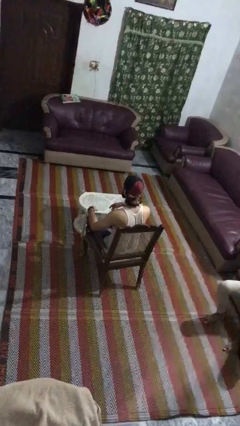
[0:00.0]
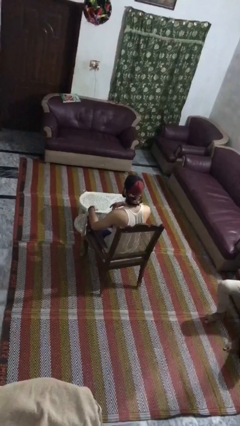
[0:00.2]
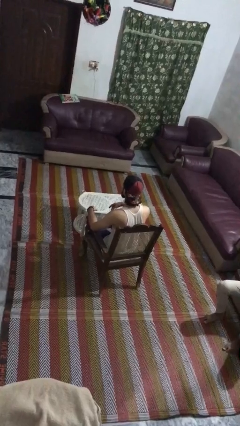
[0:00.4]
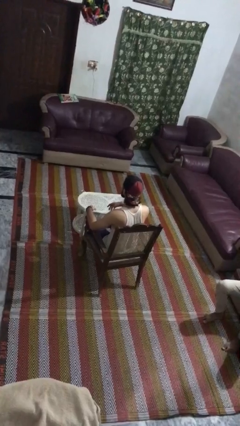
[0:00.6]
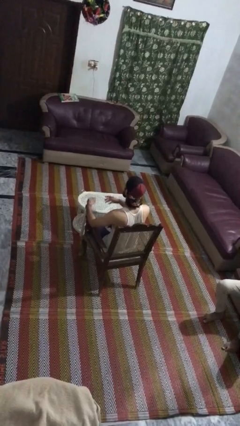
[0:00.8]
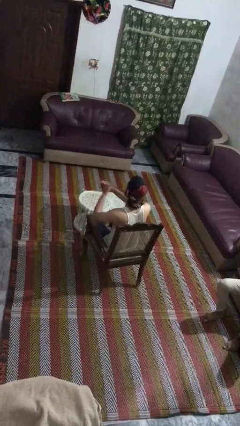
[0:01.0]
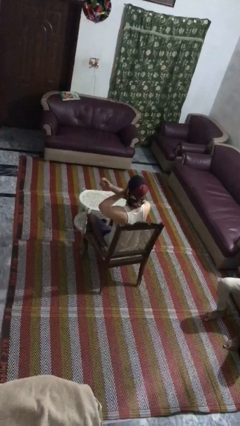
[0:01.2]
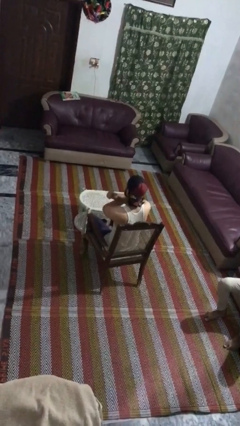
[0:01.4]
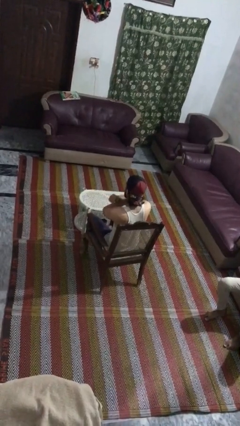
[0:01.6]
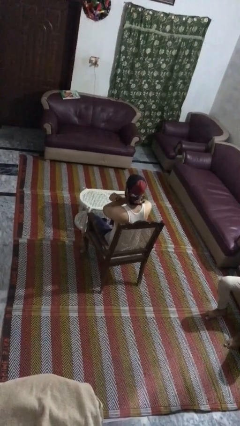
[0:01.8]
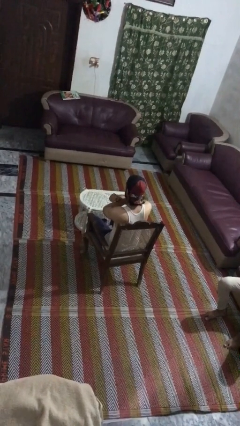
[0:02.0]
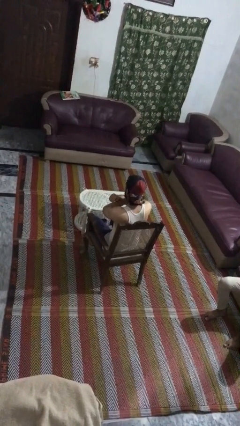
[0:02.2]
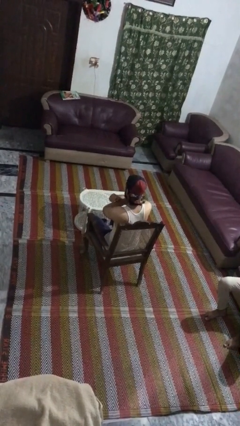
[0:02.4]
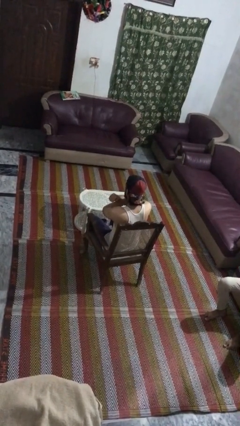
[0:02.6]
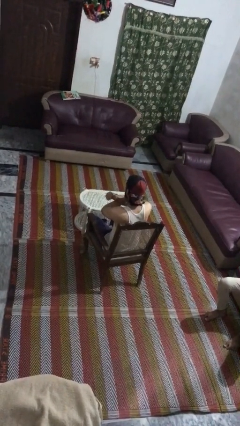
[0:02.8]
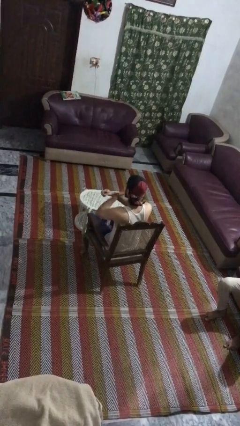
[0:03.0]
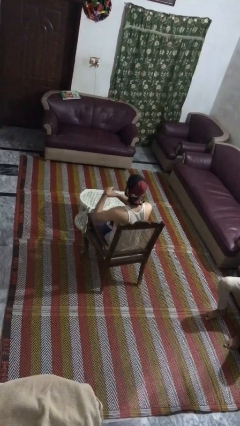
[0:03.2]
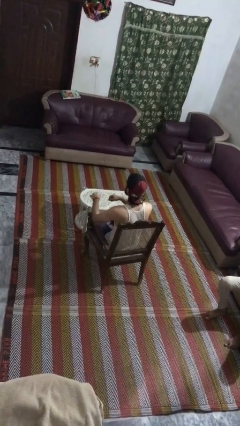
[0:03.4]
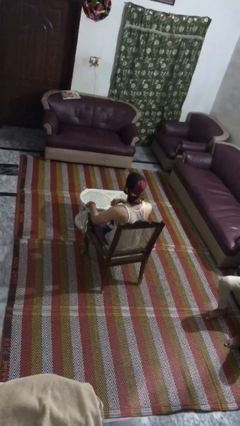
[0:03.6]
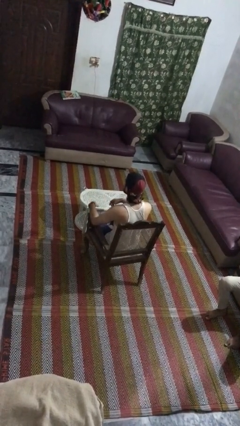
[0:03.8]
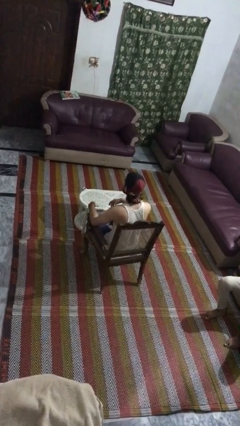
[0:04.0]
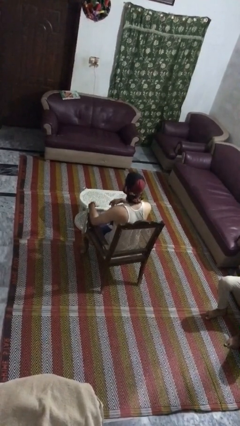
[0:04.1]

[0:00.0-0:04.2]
person gestures arms x

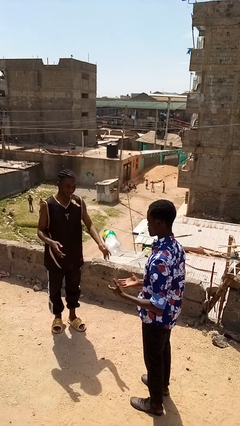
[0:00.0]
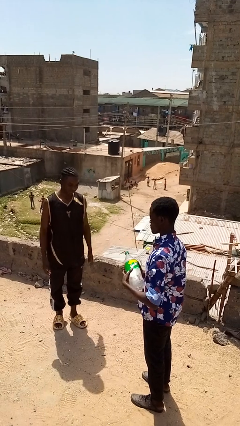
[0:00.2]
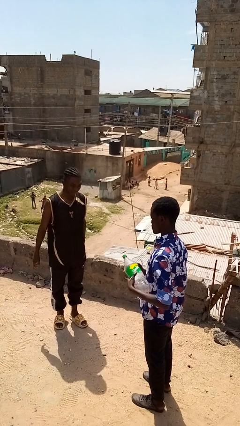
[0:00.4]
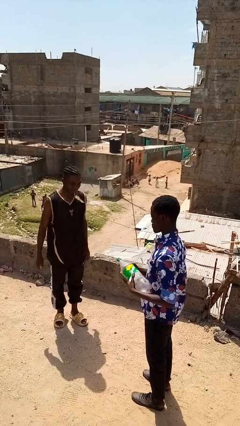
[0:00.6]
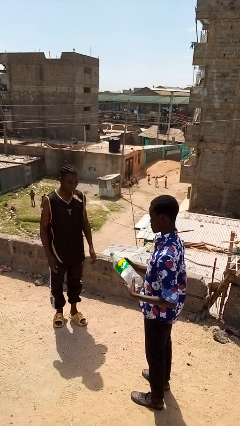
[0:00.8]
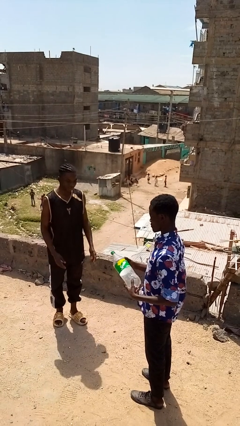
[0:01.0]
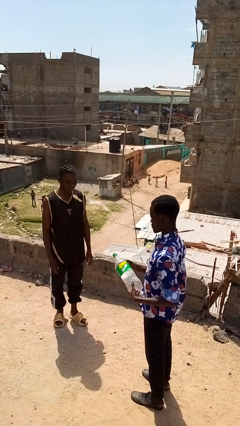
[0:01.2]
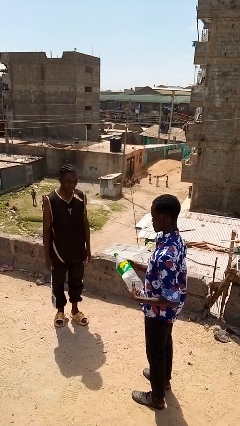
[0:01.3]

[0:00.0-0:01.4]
person catches object from person

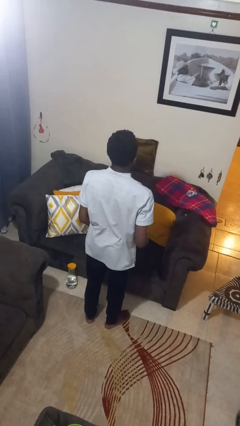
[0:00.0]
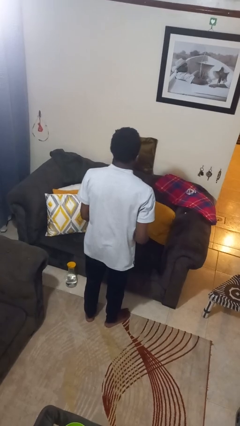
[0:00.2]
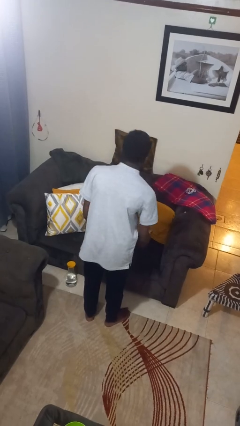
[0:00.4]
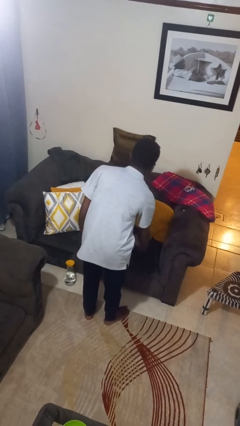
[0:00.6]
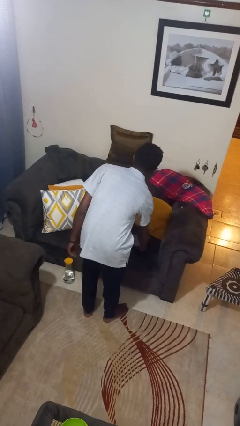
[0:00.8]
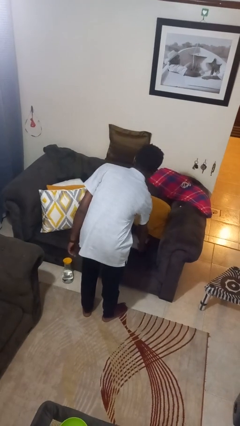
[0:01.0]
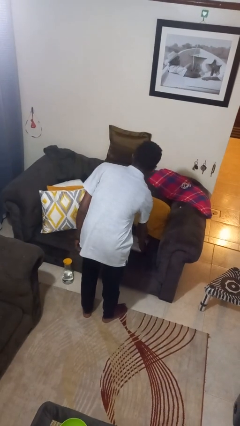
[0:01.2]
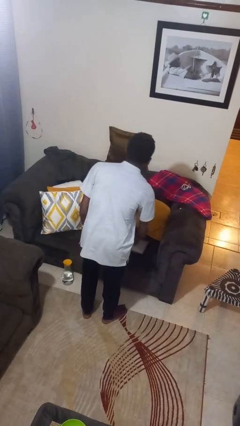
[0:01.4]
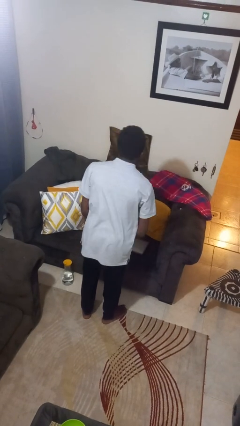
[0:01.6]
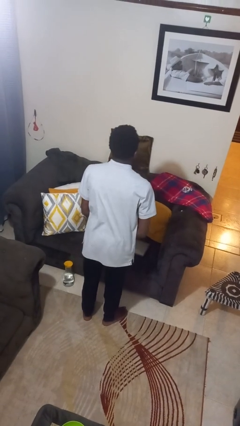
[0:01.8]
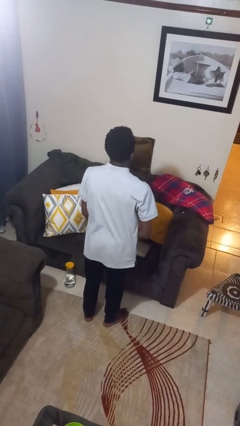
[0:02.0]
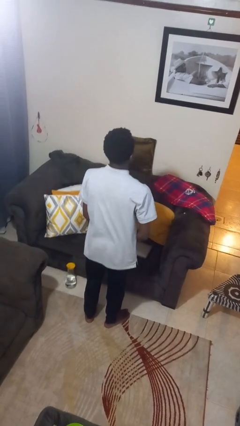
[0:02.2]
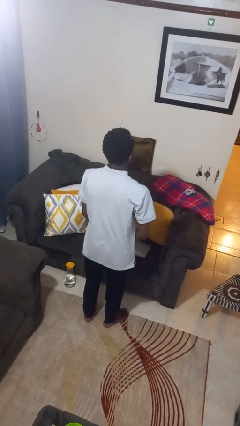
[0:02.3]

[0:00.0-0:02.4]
person puts down object on couch

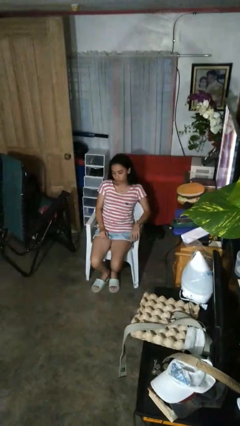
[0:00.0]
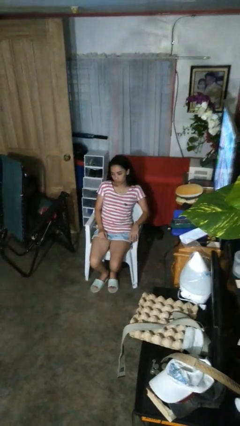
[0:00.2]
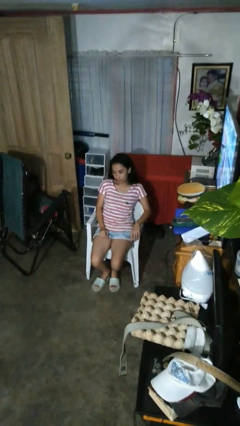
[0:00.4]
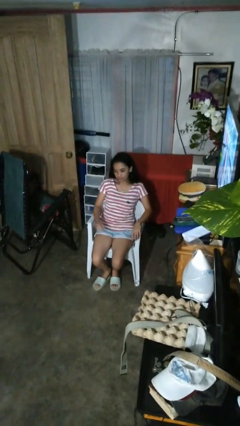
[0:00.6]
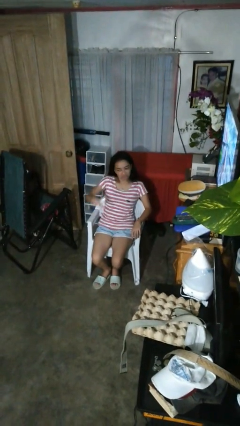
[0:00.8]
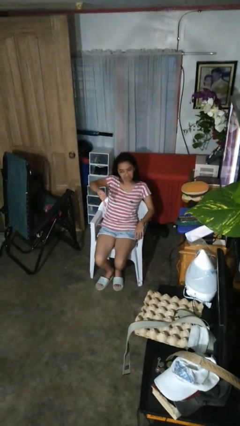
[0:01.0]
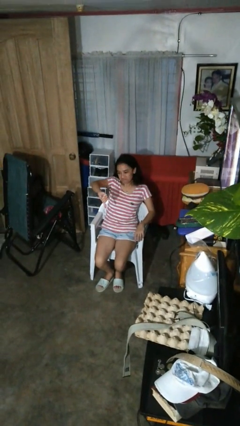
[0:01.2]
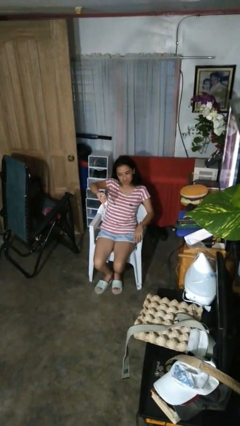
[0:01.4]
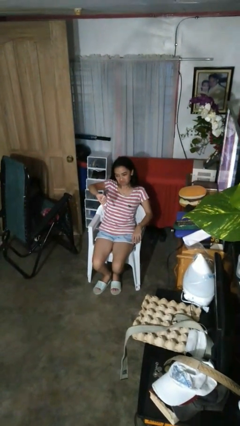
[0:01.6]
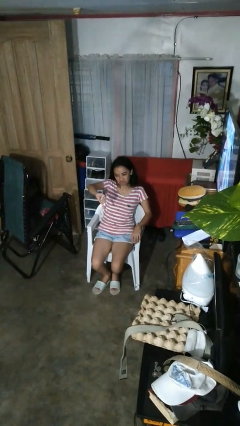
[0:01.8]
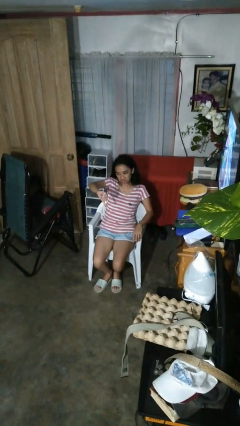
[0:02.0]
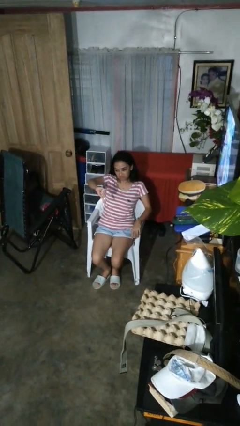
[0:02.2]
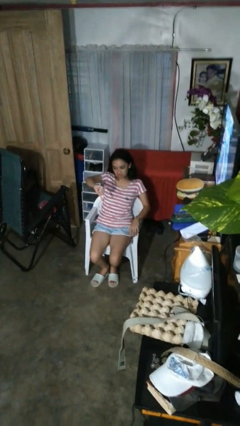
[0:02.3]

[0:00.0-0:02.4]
person gestures thumbs down

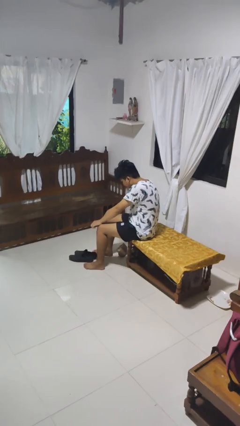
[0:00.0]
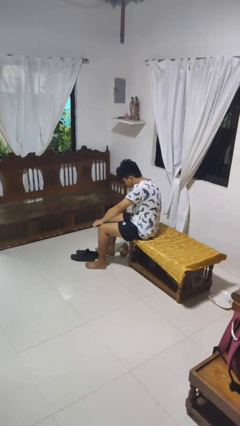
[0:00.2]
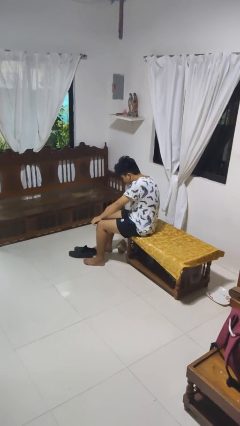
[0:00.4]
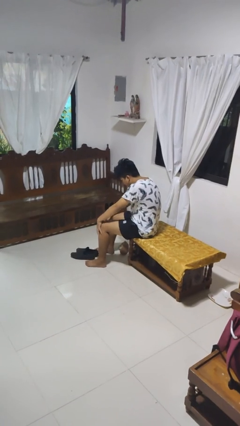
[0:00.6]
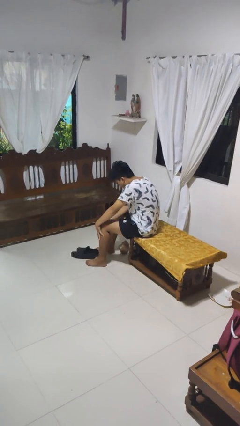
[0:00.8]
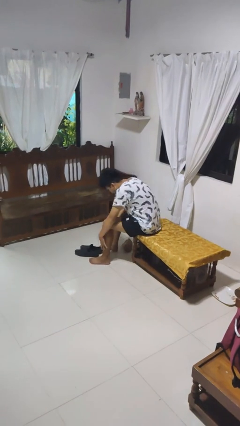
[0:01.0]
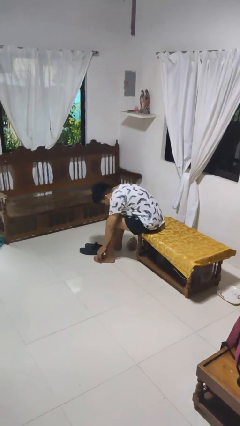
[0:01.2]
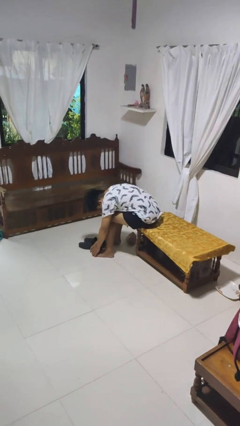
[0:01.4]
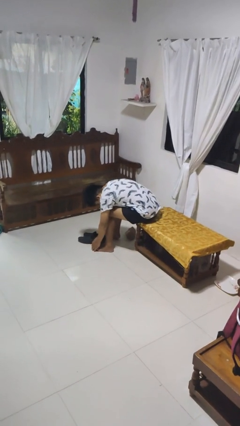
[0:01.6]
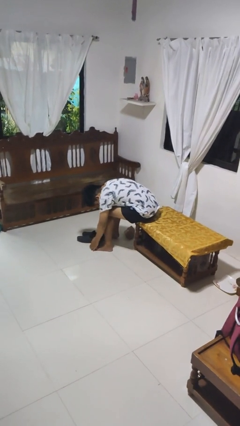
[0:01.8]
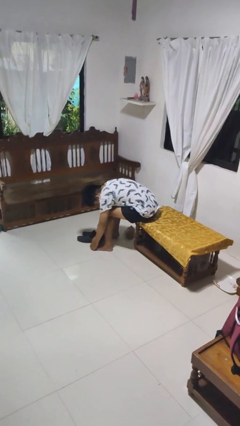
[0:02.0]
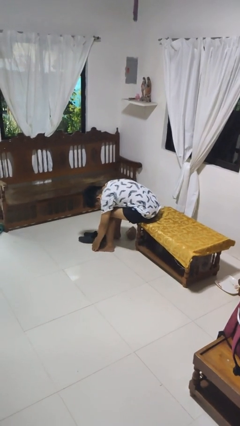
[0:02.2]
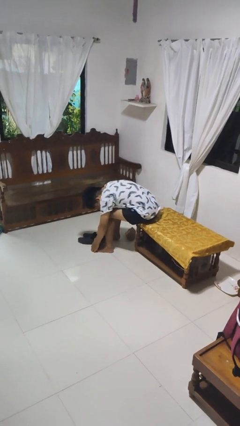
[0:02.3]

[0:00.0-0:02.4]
person rubs foot

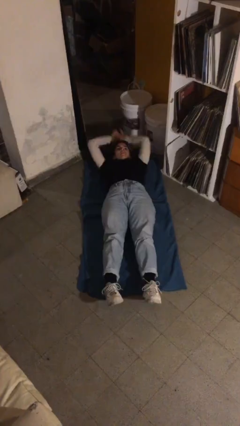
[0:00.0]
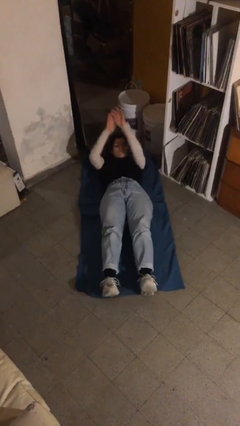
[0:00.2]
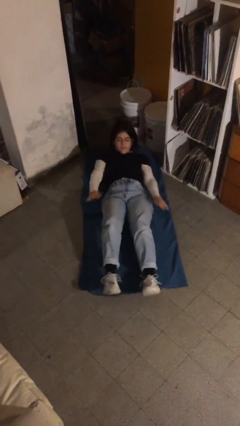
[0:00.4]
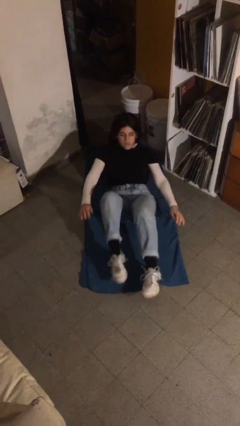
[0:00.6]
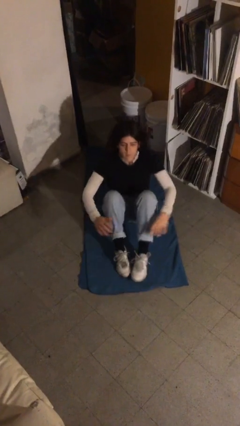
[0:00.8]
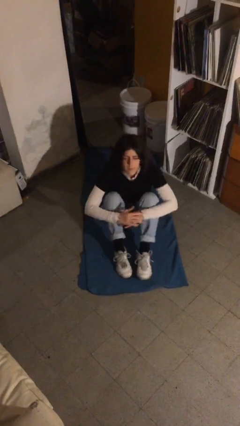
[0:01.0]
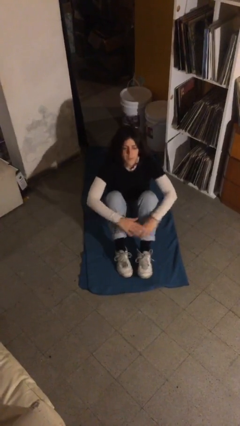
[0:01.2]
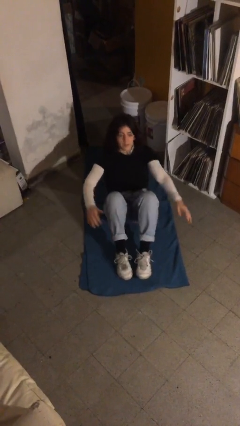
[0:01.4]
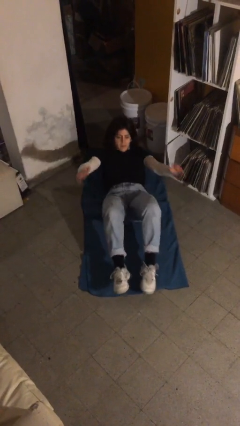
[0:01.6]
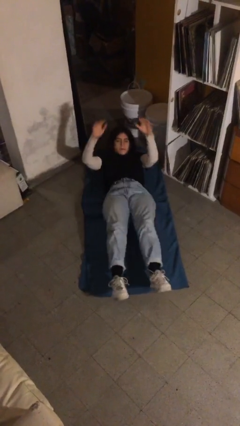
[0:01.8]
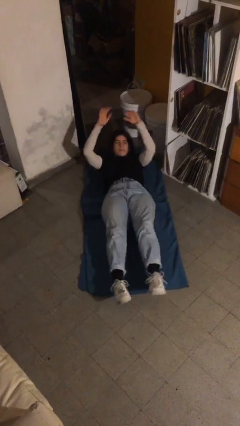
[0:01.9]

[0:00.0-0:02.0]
person exercises with situp

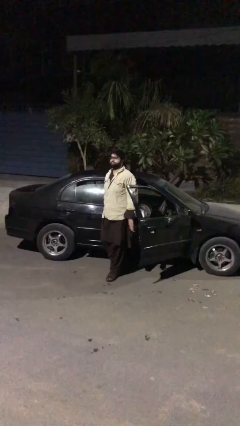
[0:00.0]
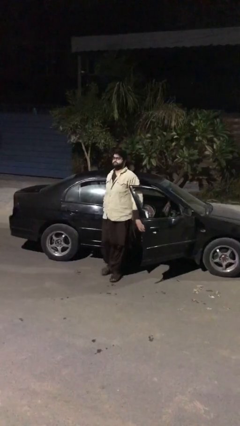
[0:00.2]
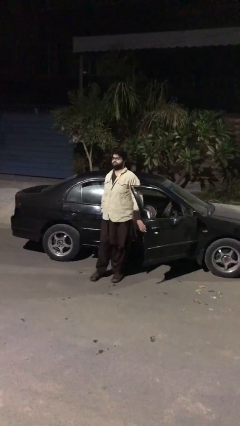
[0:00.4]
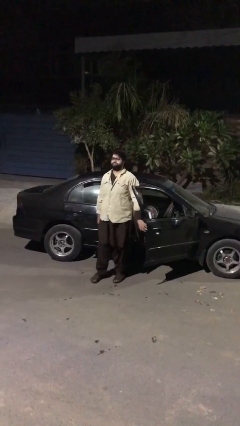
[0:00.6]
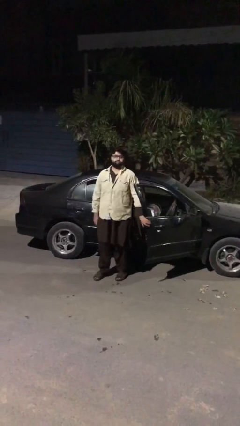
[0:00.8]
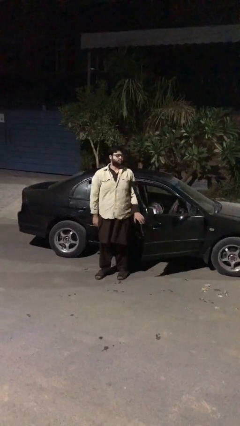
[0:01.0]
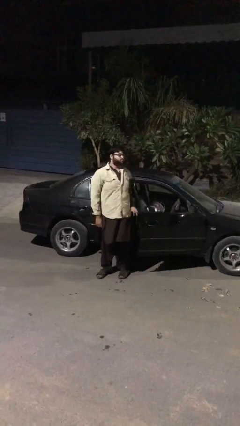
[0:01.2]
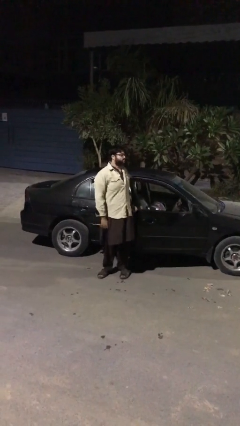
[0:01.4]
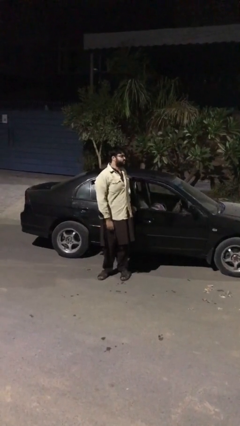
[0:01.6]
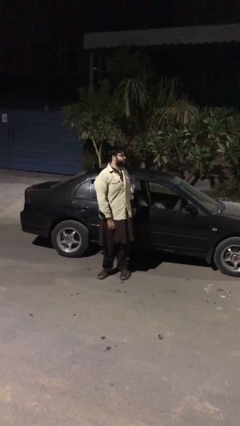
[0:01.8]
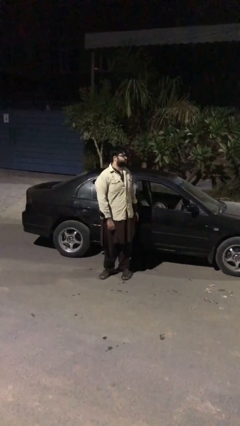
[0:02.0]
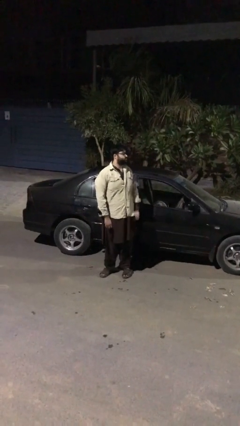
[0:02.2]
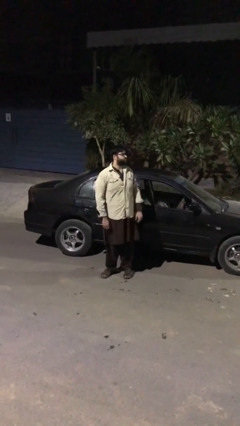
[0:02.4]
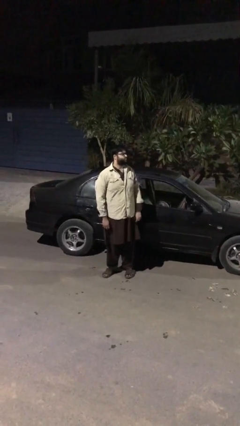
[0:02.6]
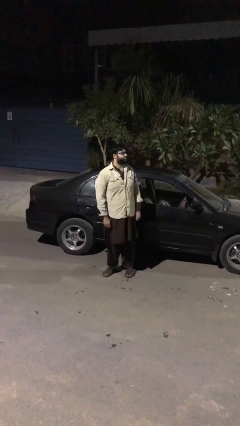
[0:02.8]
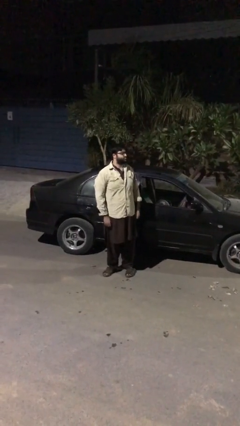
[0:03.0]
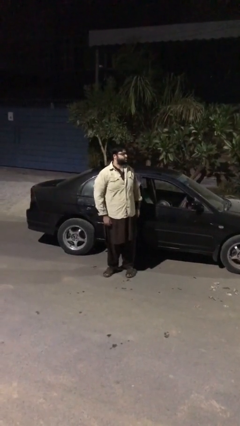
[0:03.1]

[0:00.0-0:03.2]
person closes car door
